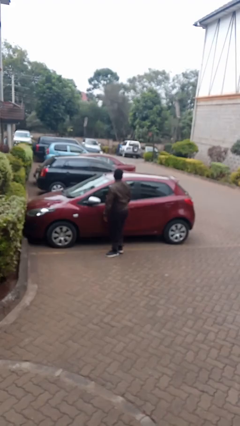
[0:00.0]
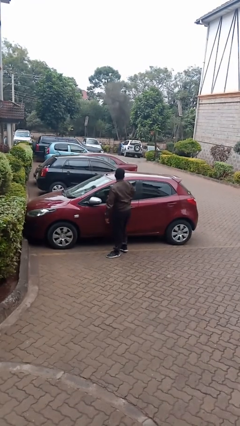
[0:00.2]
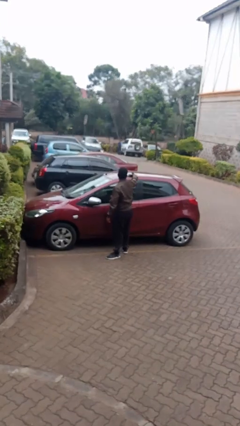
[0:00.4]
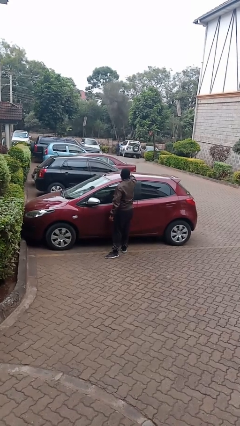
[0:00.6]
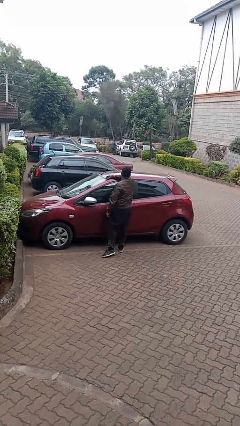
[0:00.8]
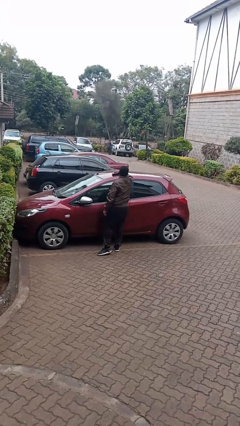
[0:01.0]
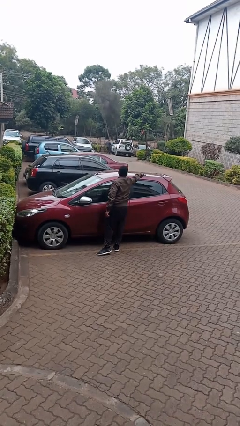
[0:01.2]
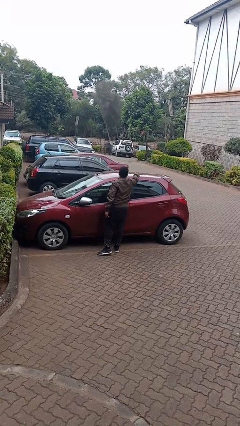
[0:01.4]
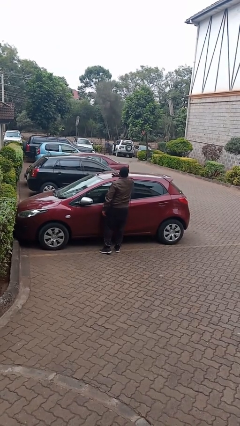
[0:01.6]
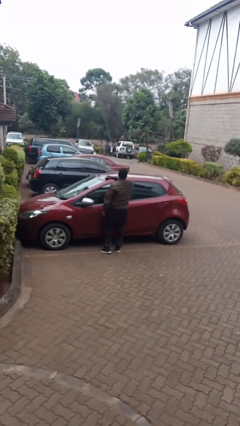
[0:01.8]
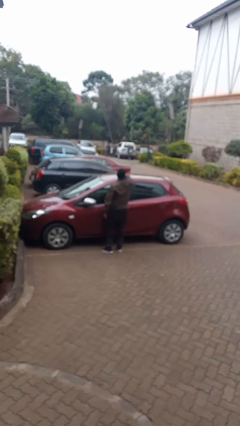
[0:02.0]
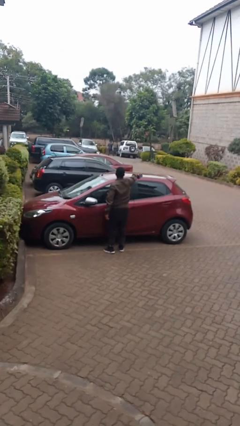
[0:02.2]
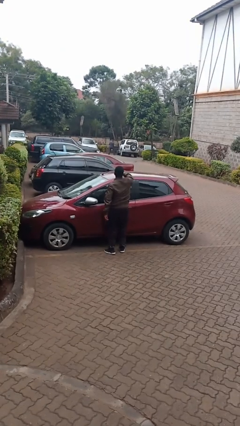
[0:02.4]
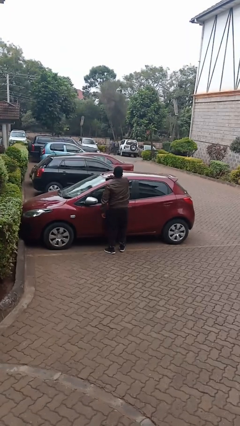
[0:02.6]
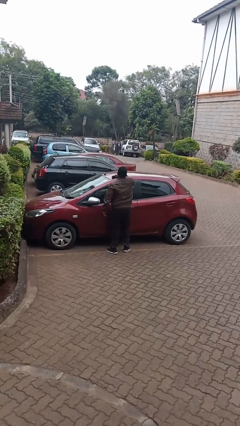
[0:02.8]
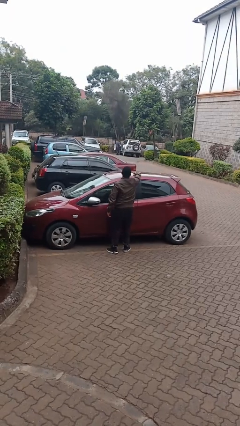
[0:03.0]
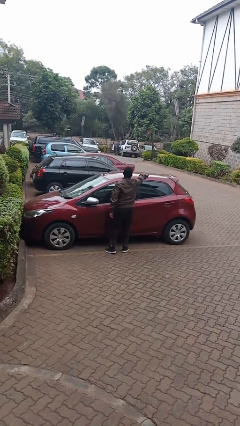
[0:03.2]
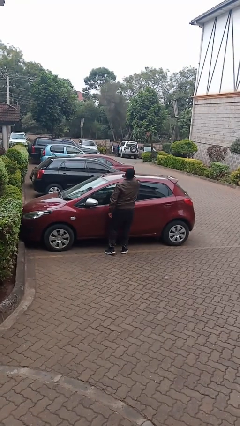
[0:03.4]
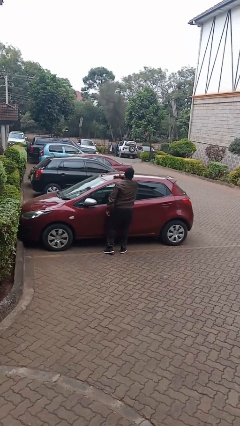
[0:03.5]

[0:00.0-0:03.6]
person polishes car with rag

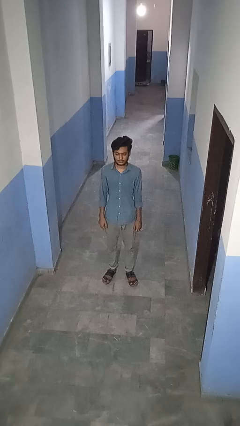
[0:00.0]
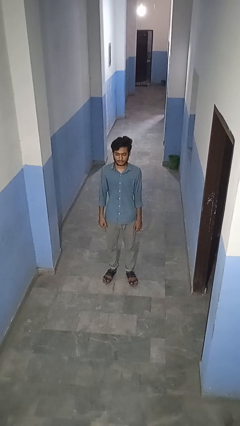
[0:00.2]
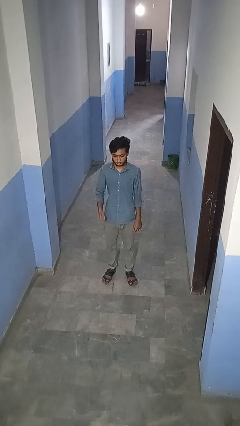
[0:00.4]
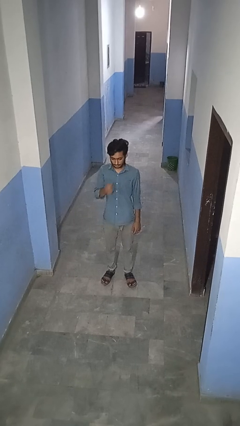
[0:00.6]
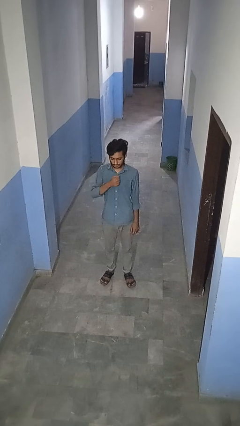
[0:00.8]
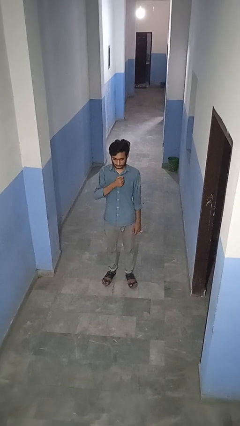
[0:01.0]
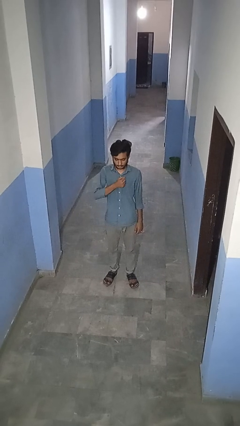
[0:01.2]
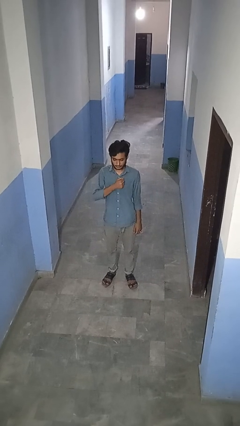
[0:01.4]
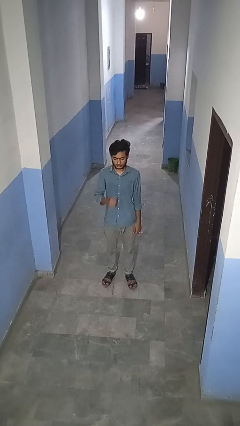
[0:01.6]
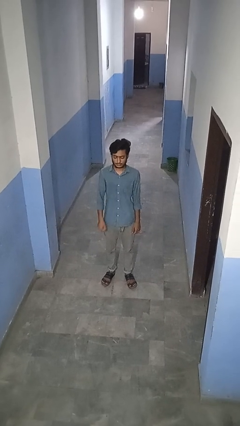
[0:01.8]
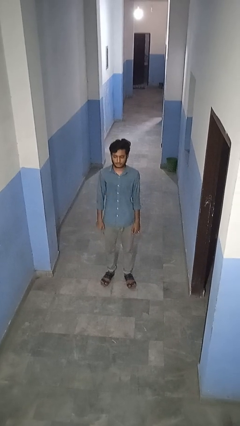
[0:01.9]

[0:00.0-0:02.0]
person drums on chest

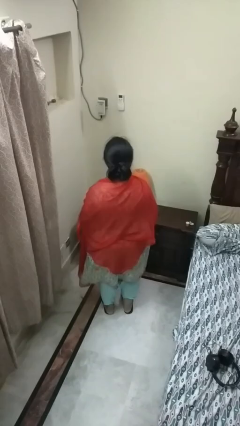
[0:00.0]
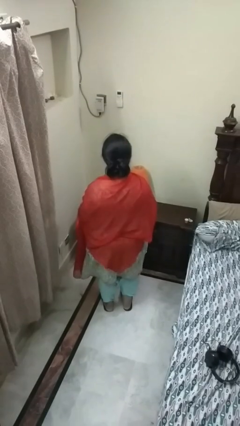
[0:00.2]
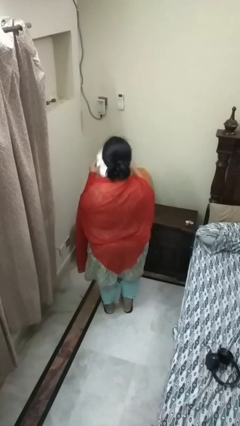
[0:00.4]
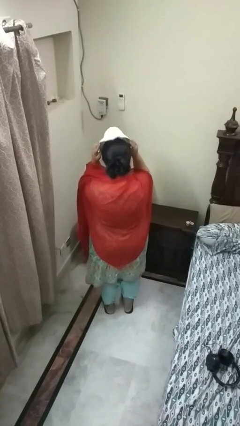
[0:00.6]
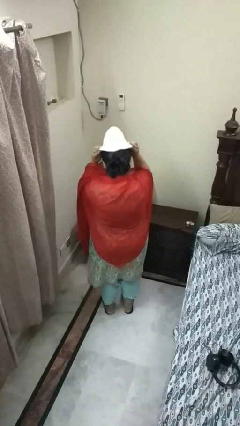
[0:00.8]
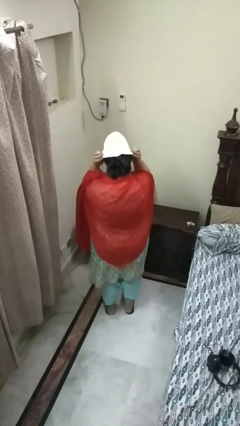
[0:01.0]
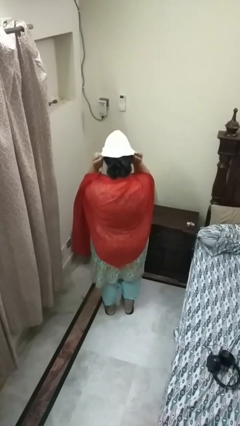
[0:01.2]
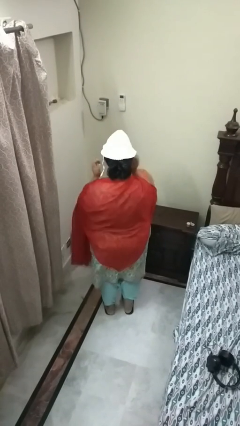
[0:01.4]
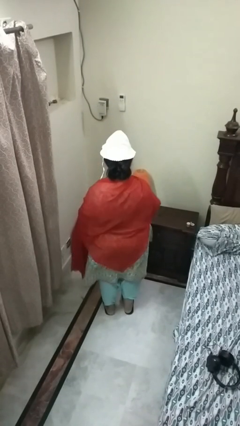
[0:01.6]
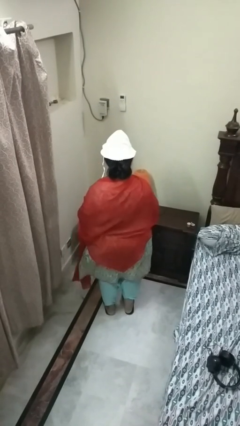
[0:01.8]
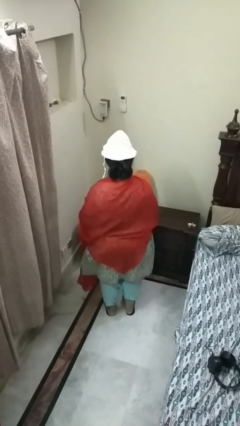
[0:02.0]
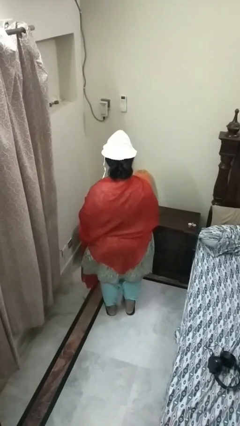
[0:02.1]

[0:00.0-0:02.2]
person puts on hat

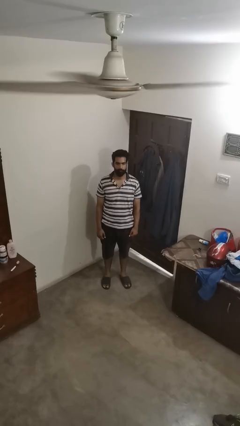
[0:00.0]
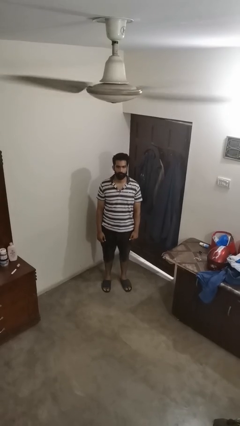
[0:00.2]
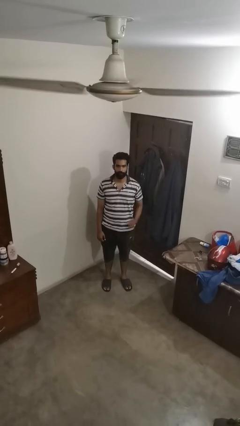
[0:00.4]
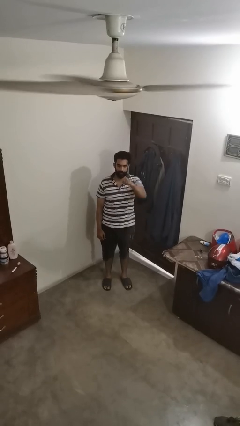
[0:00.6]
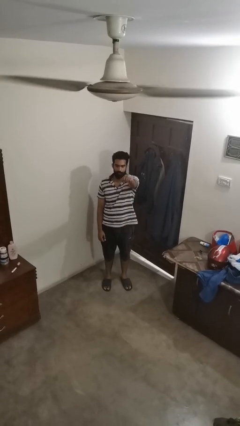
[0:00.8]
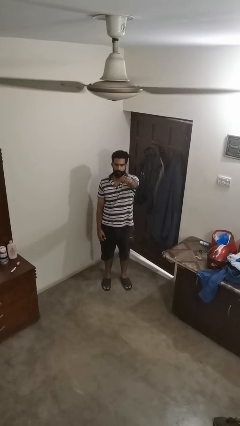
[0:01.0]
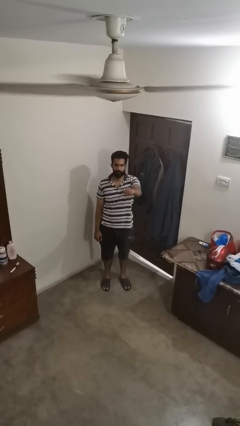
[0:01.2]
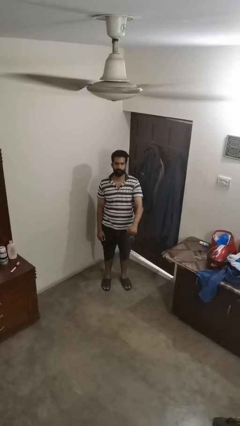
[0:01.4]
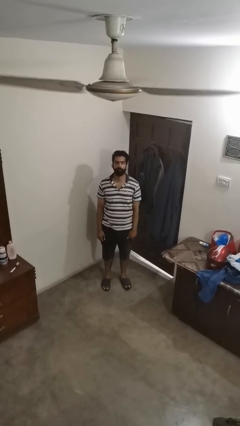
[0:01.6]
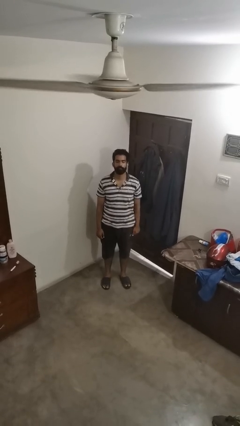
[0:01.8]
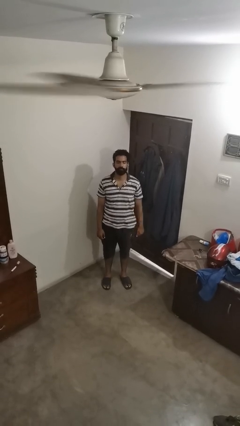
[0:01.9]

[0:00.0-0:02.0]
person punches

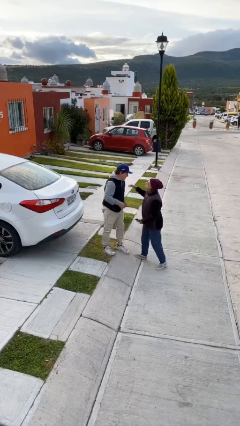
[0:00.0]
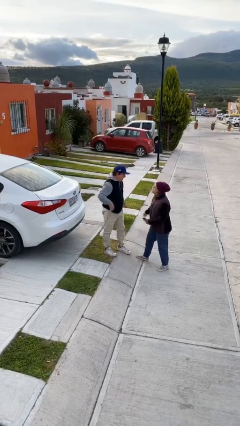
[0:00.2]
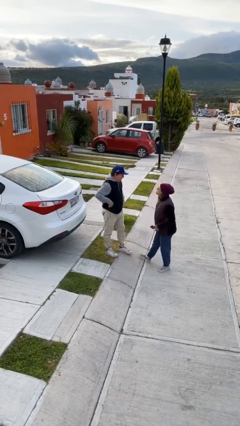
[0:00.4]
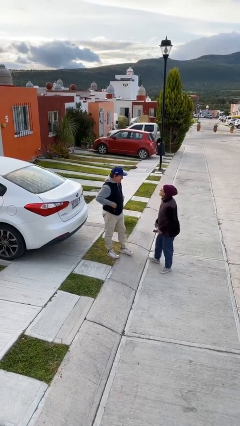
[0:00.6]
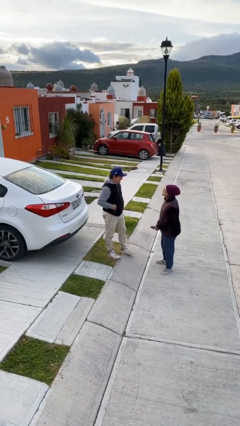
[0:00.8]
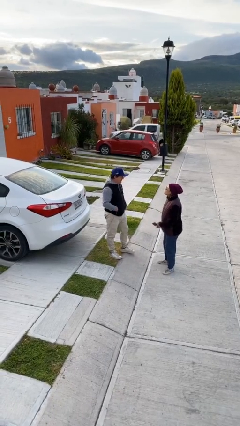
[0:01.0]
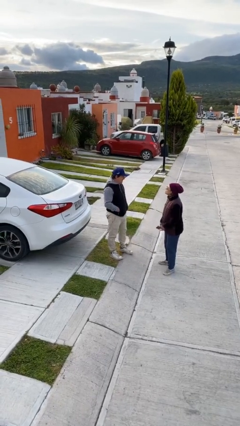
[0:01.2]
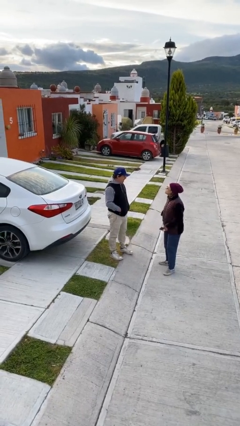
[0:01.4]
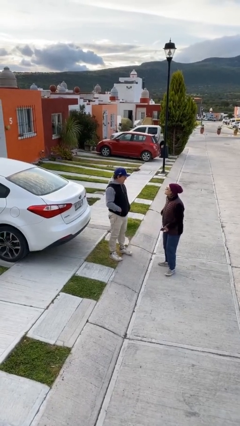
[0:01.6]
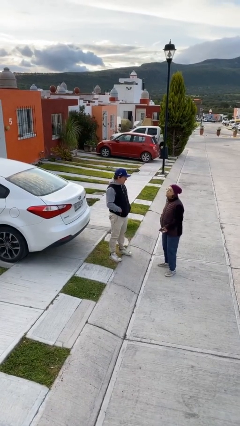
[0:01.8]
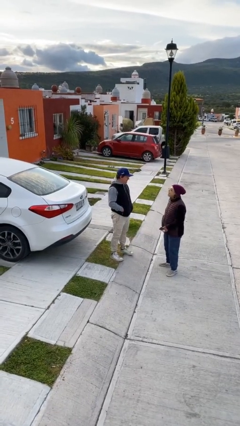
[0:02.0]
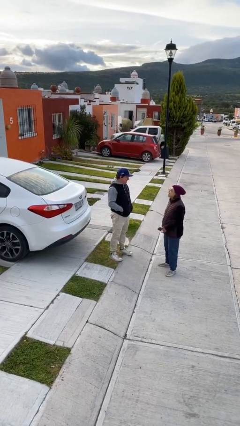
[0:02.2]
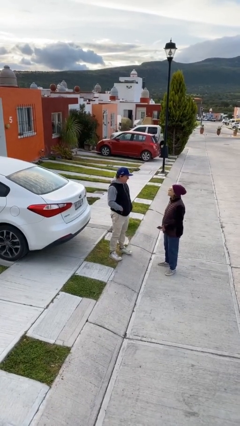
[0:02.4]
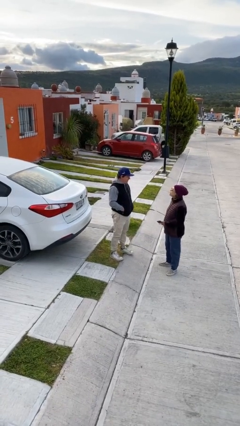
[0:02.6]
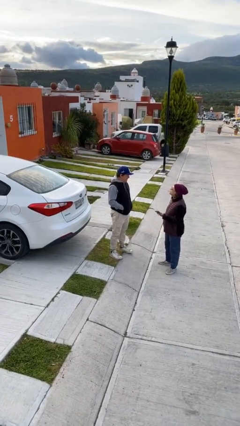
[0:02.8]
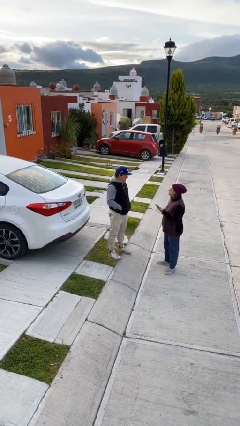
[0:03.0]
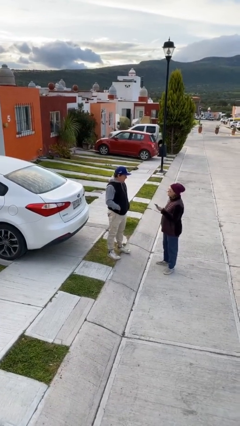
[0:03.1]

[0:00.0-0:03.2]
person talks to person

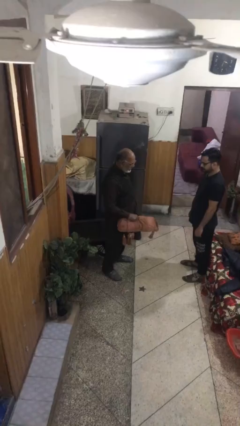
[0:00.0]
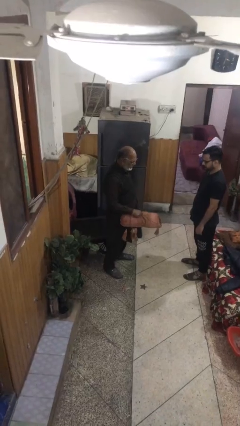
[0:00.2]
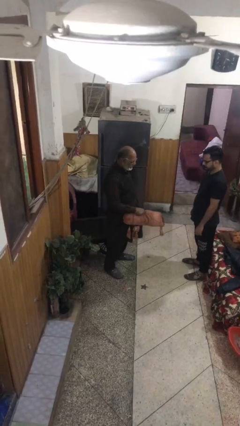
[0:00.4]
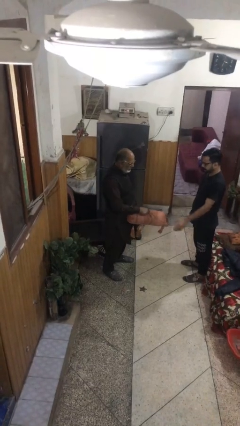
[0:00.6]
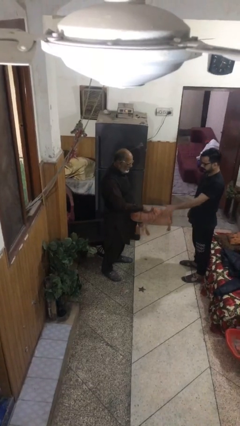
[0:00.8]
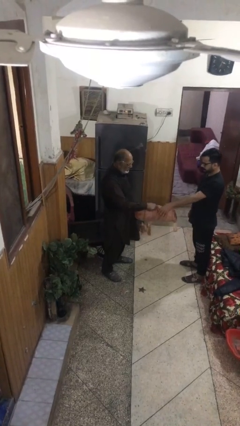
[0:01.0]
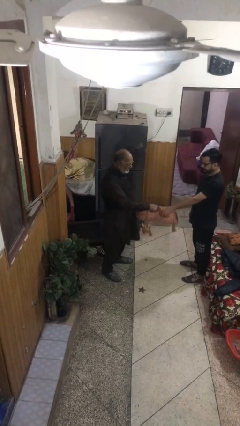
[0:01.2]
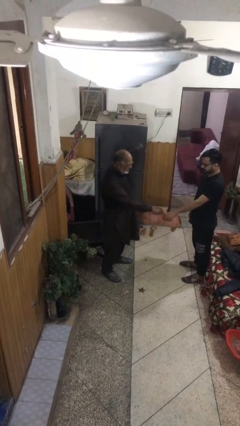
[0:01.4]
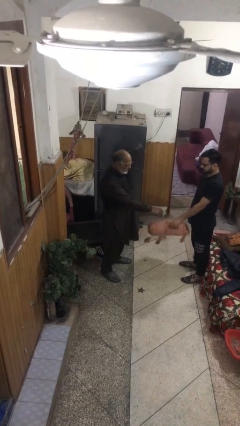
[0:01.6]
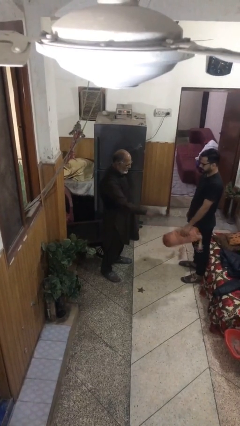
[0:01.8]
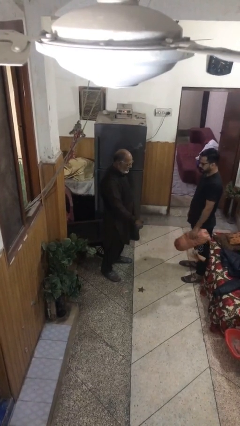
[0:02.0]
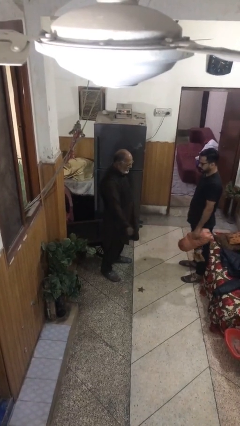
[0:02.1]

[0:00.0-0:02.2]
person transfers object to person

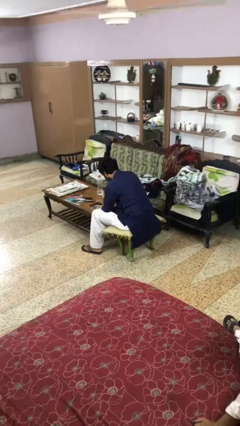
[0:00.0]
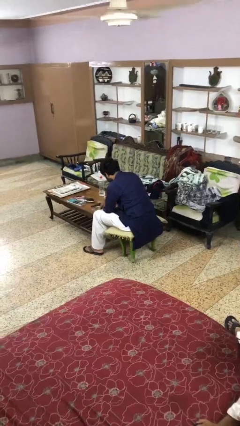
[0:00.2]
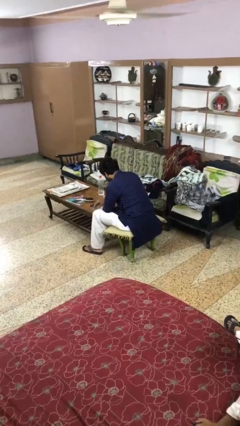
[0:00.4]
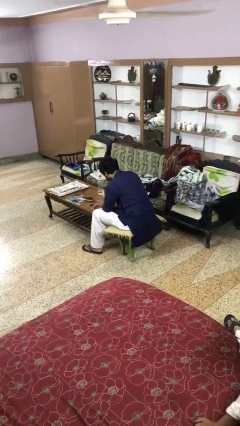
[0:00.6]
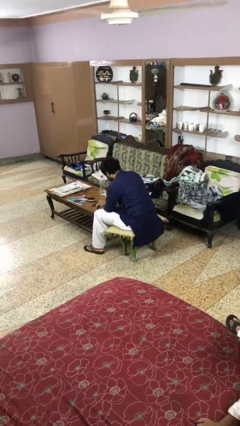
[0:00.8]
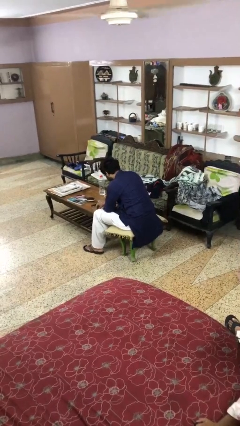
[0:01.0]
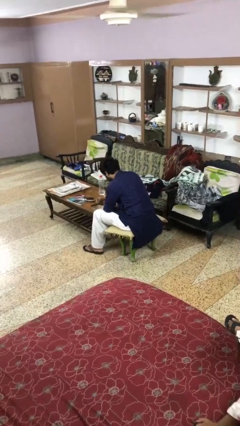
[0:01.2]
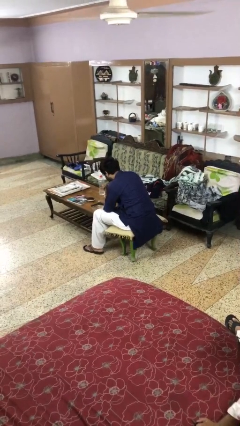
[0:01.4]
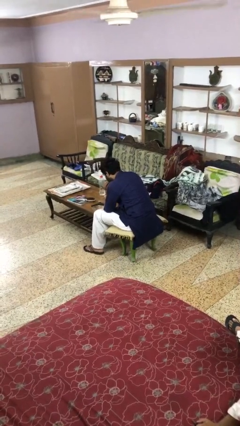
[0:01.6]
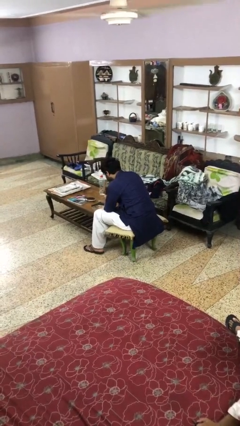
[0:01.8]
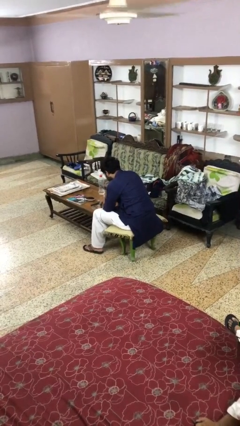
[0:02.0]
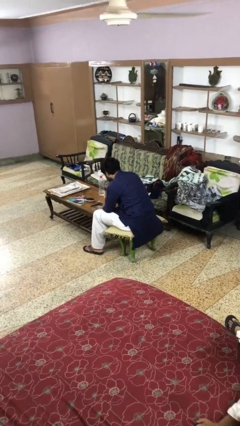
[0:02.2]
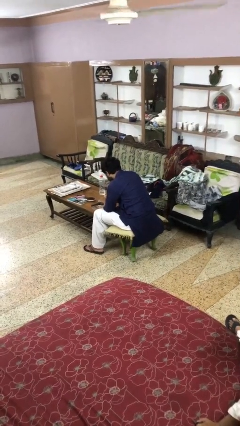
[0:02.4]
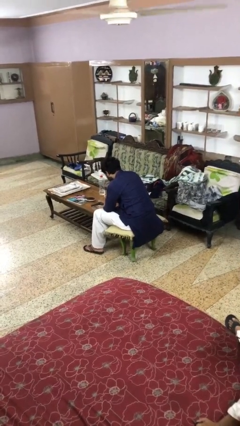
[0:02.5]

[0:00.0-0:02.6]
person eats with hands
